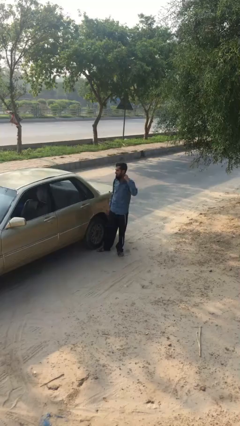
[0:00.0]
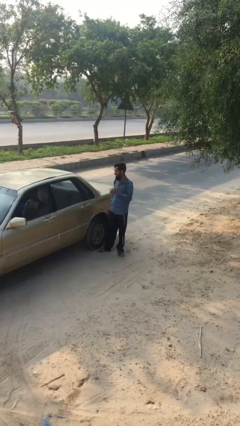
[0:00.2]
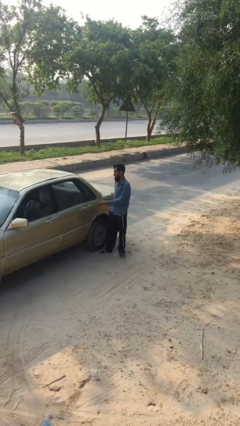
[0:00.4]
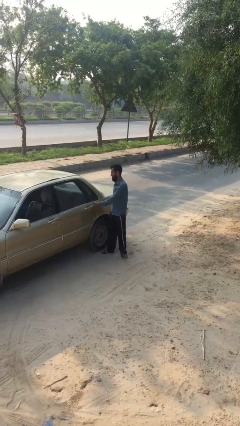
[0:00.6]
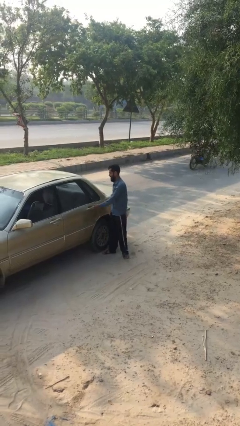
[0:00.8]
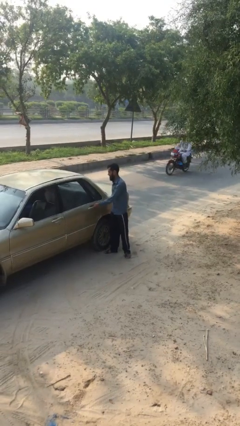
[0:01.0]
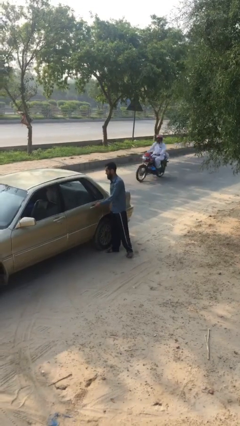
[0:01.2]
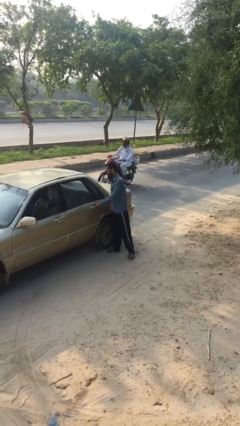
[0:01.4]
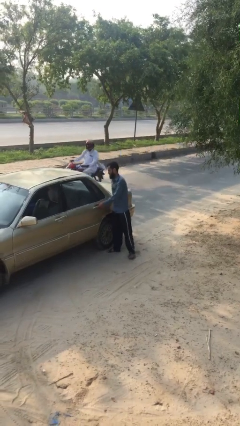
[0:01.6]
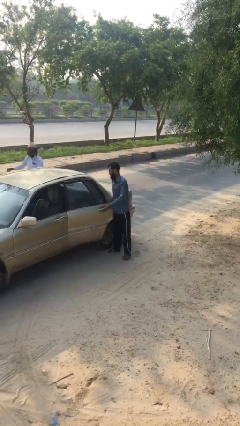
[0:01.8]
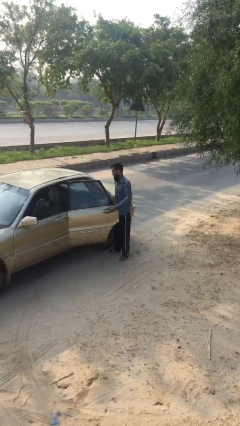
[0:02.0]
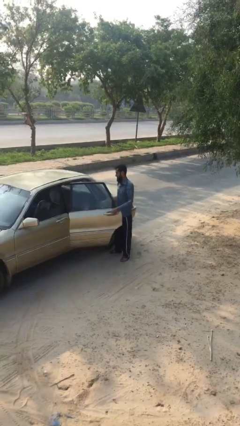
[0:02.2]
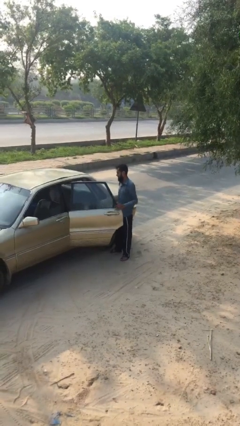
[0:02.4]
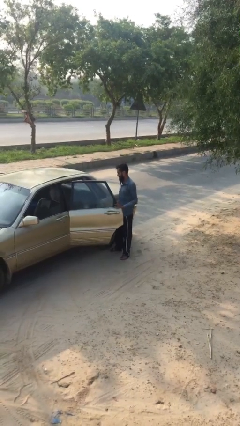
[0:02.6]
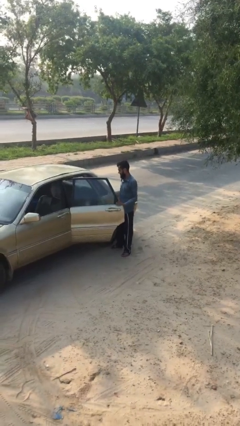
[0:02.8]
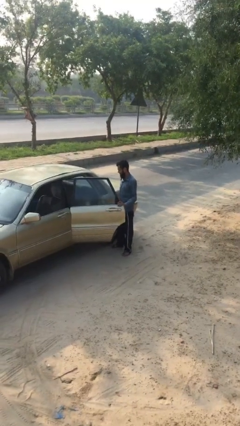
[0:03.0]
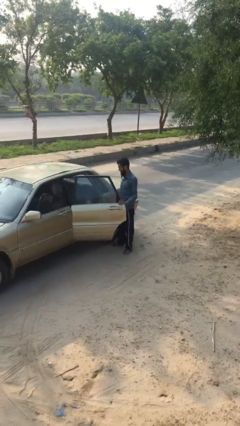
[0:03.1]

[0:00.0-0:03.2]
person opens car door

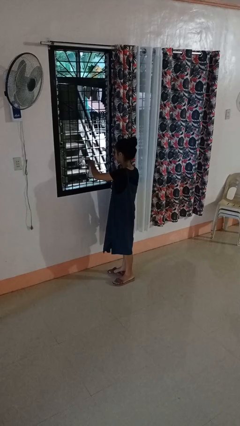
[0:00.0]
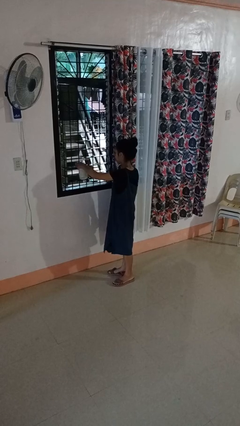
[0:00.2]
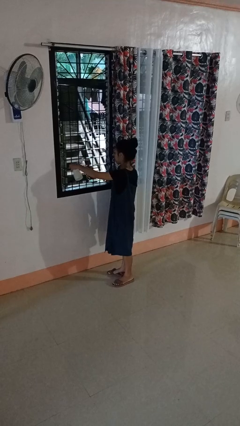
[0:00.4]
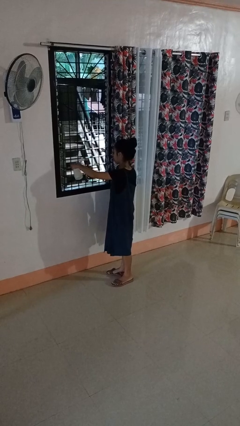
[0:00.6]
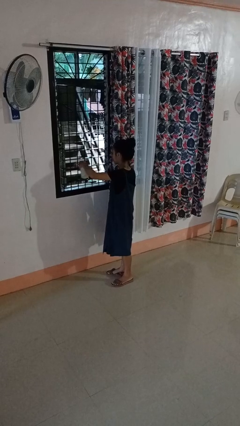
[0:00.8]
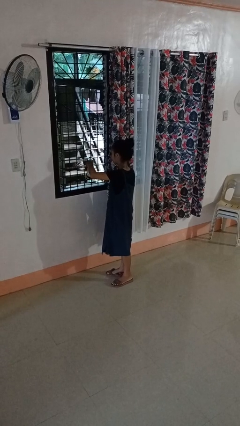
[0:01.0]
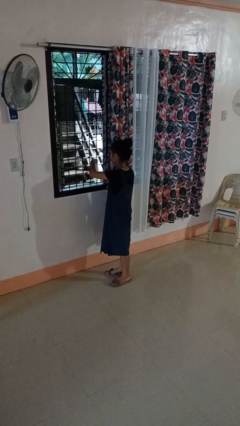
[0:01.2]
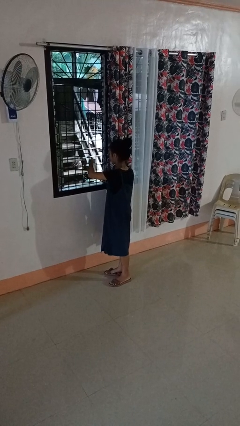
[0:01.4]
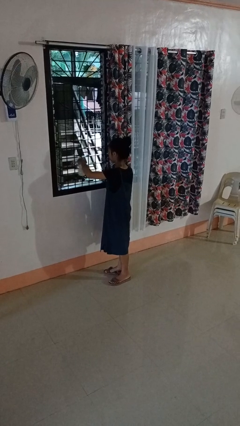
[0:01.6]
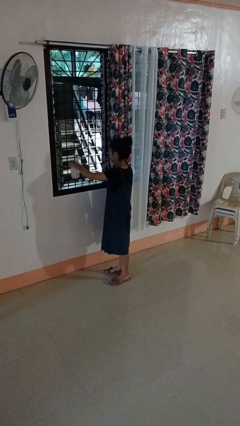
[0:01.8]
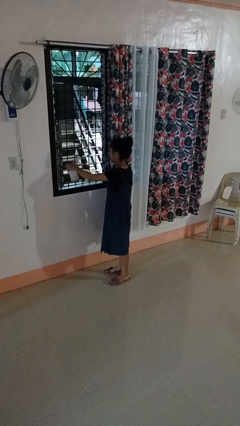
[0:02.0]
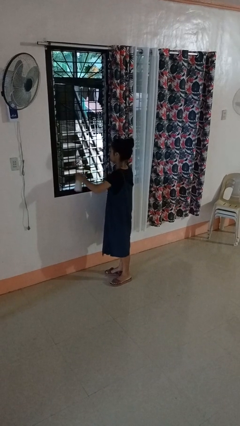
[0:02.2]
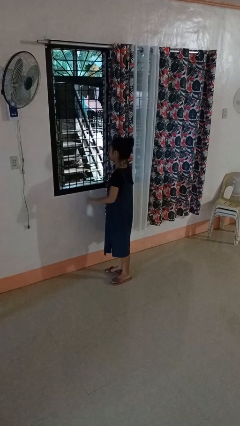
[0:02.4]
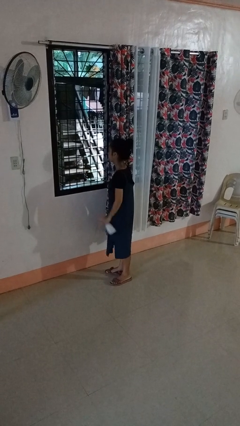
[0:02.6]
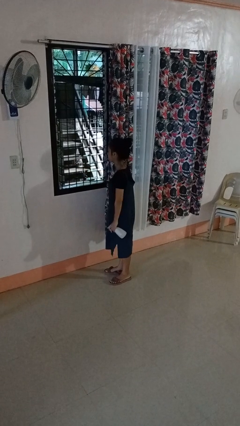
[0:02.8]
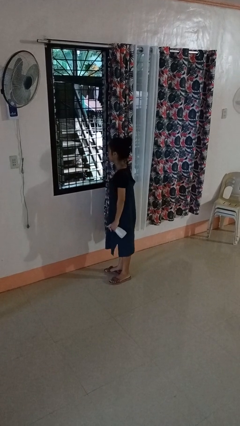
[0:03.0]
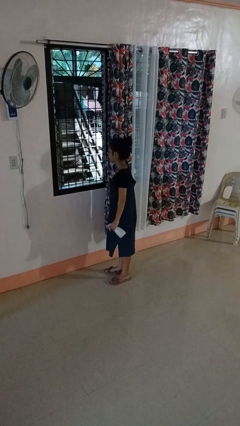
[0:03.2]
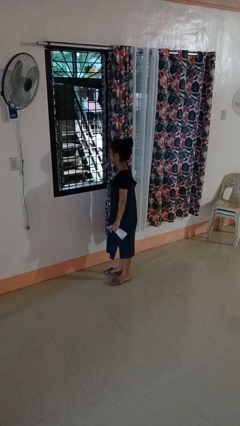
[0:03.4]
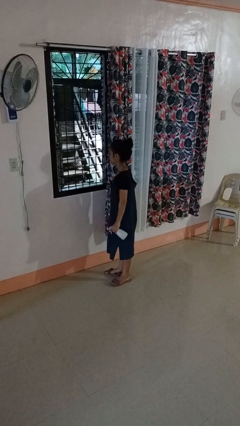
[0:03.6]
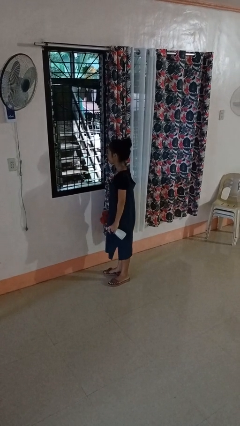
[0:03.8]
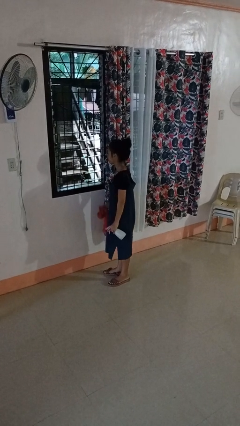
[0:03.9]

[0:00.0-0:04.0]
person sprays from bottle

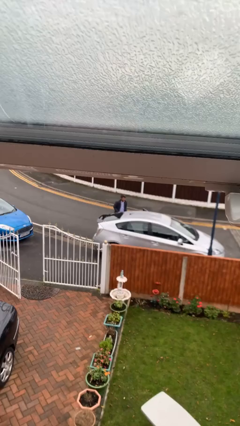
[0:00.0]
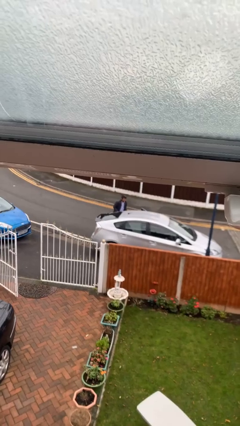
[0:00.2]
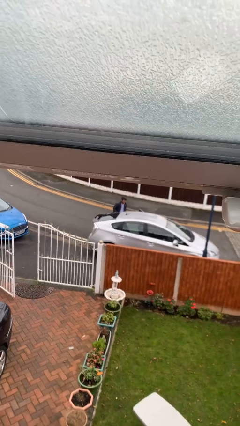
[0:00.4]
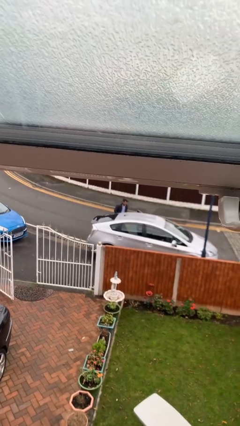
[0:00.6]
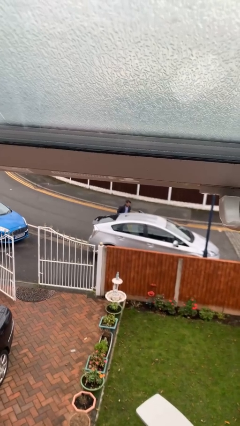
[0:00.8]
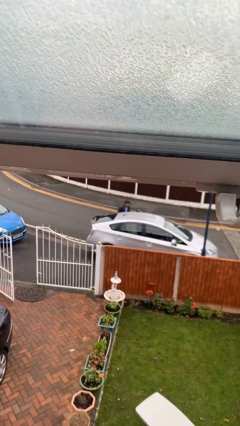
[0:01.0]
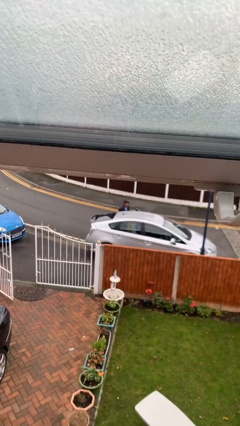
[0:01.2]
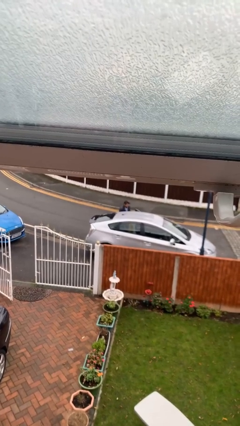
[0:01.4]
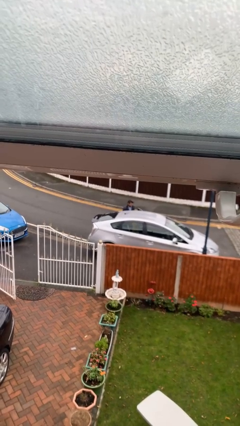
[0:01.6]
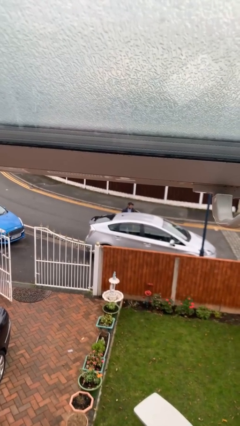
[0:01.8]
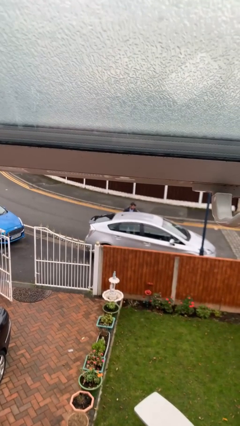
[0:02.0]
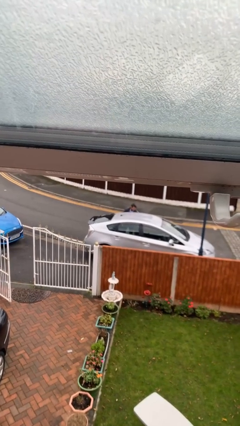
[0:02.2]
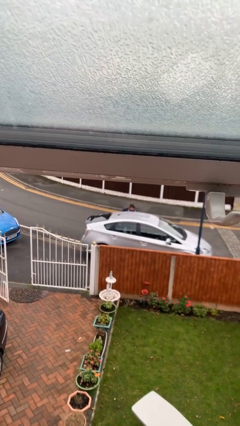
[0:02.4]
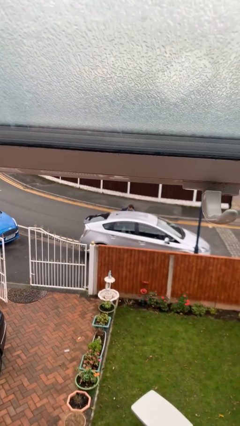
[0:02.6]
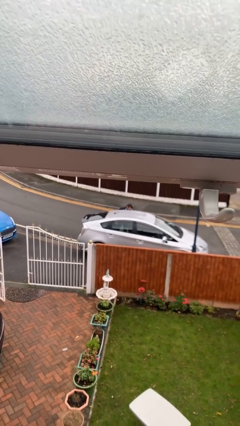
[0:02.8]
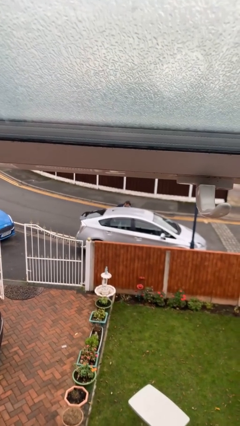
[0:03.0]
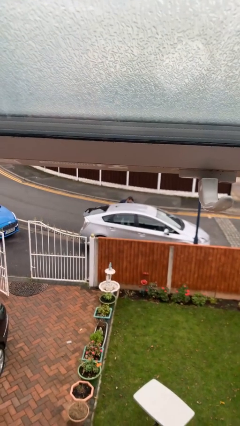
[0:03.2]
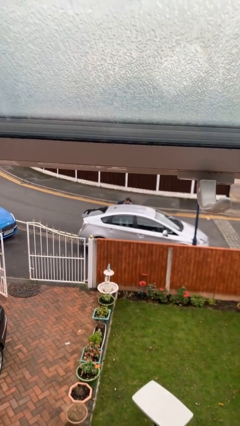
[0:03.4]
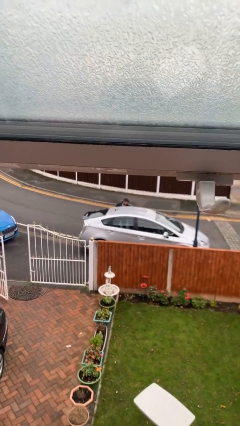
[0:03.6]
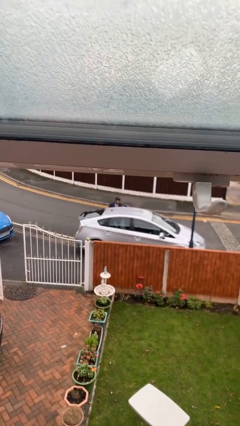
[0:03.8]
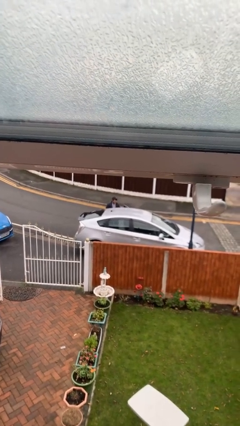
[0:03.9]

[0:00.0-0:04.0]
person loads car

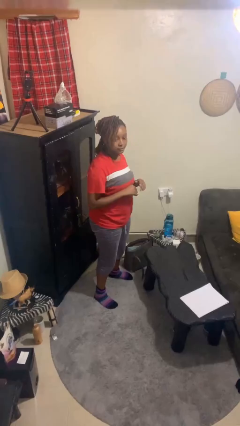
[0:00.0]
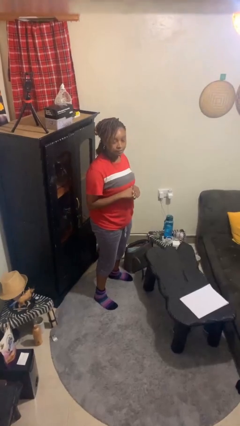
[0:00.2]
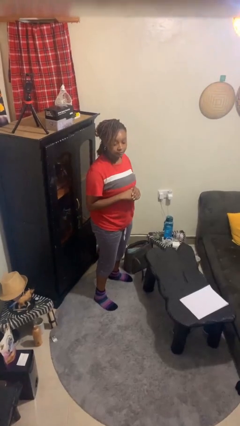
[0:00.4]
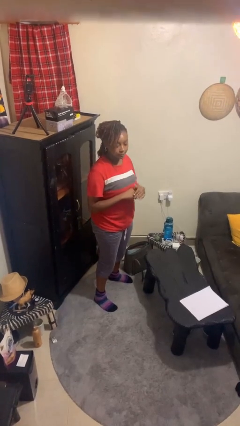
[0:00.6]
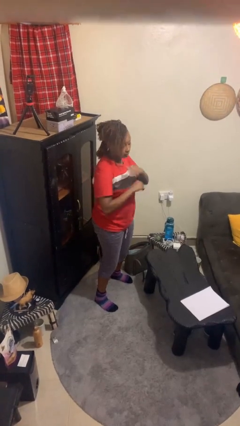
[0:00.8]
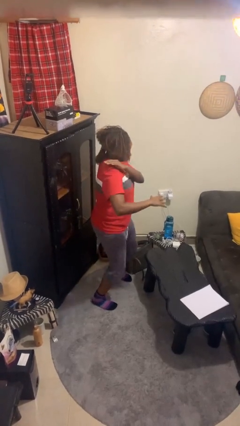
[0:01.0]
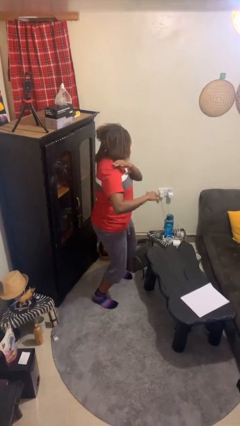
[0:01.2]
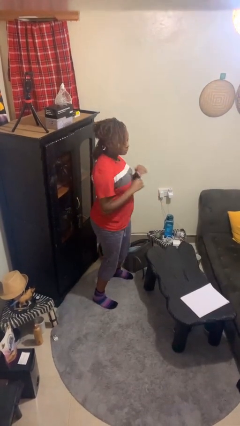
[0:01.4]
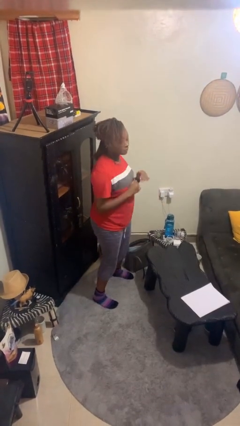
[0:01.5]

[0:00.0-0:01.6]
person karate chop

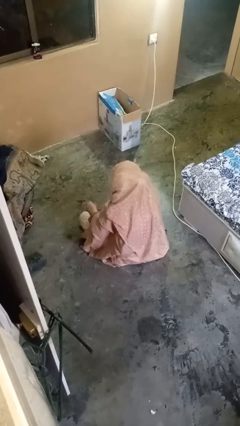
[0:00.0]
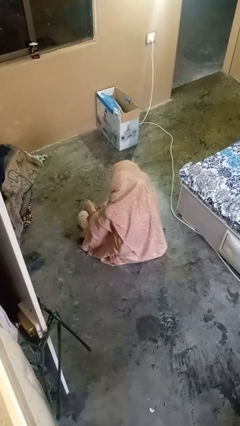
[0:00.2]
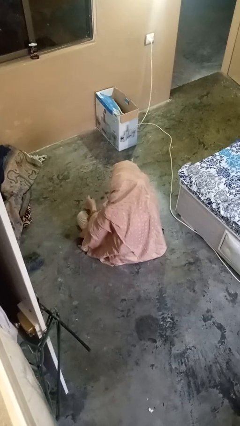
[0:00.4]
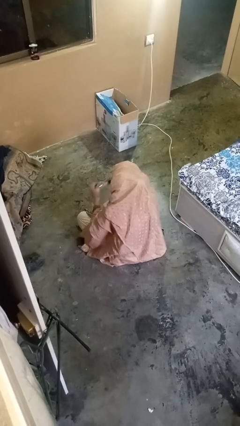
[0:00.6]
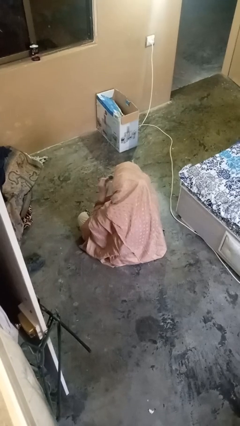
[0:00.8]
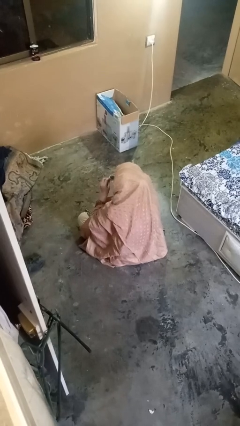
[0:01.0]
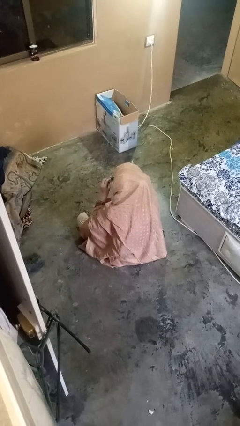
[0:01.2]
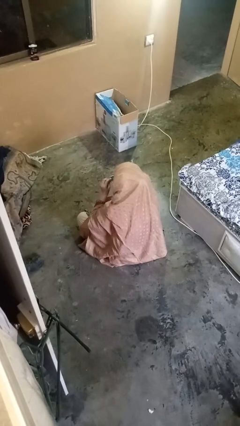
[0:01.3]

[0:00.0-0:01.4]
person puts on glasses

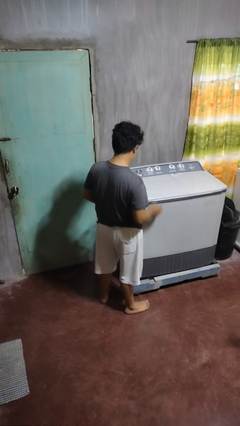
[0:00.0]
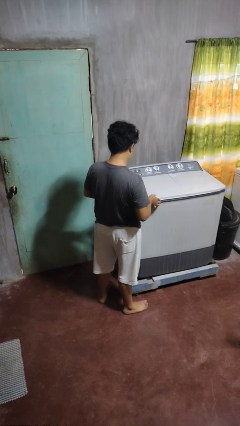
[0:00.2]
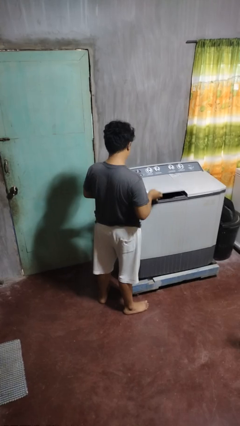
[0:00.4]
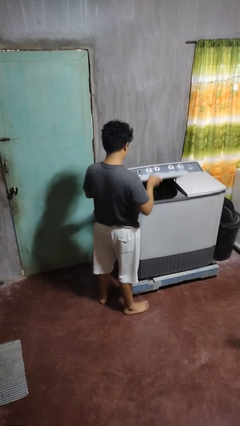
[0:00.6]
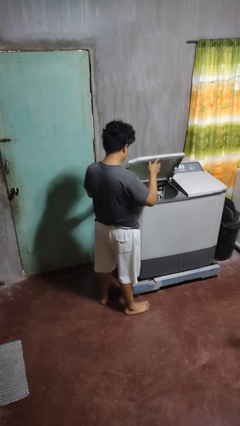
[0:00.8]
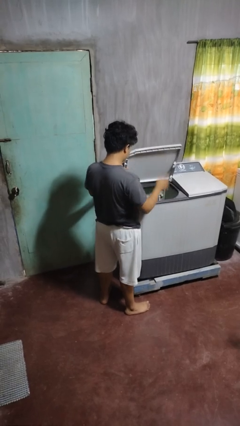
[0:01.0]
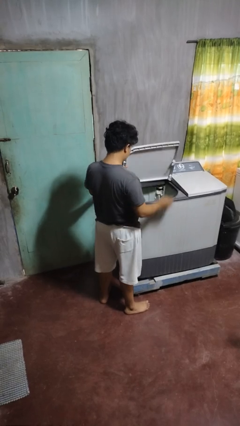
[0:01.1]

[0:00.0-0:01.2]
person opens clothes washer

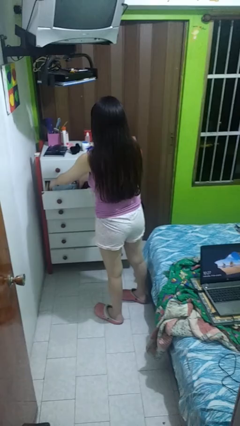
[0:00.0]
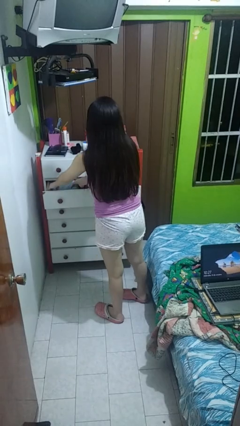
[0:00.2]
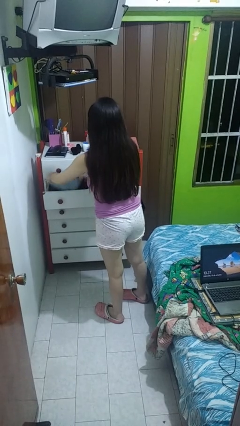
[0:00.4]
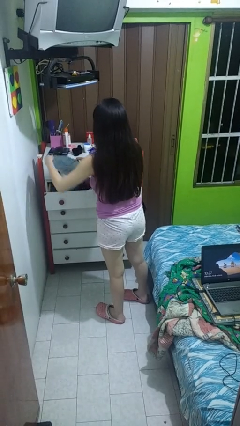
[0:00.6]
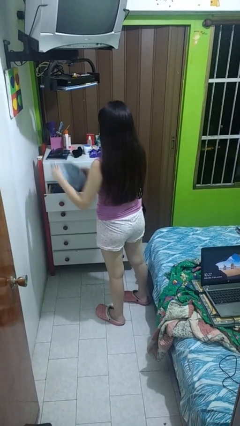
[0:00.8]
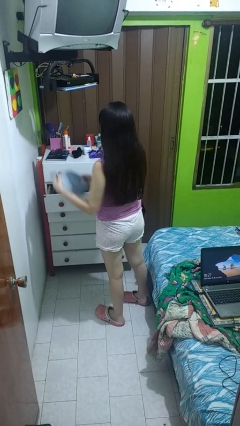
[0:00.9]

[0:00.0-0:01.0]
person takes clothes from dresser

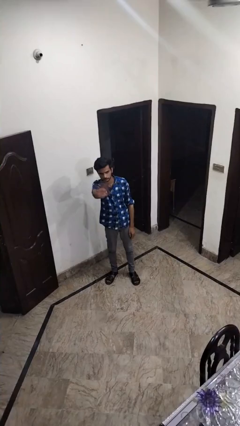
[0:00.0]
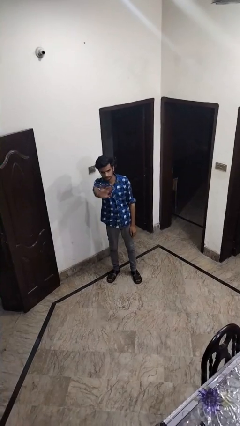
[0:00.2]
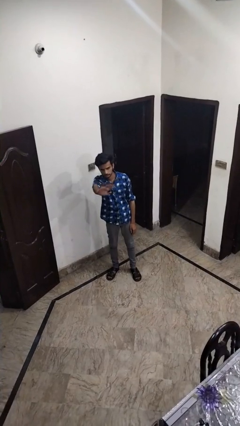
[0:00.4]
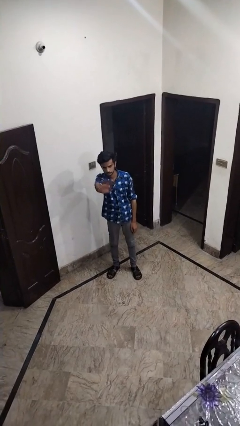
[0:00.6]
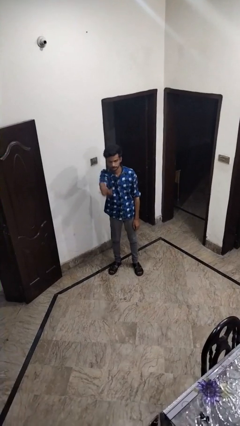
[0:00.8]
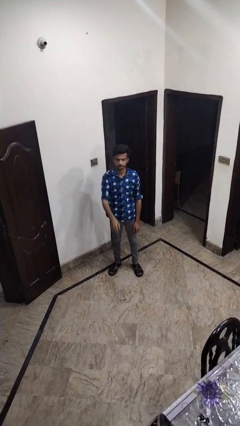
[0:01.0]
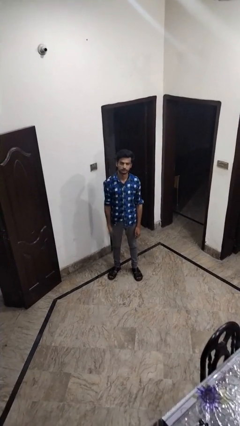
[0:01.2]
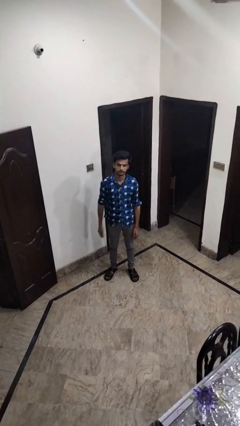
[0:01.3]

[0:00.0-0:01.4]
person waves at person
